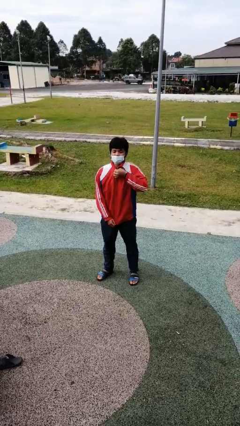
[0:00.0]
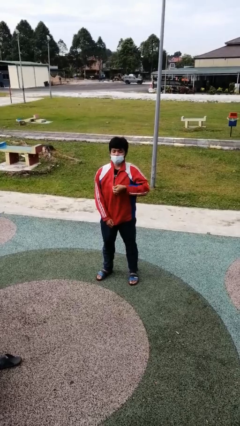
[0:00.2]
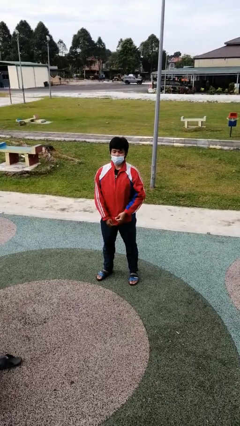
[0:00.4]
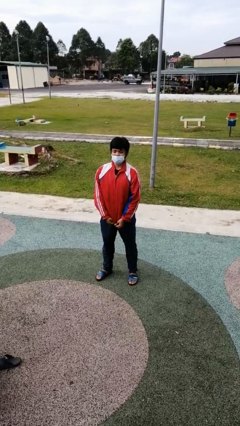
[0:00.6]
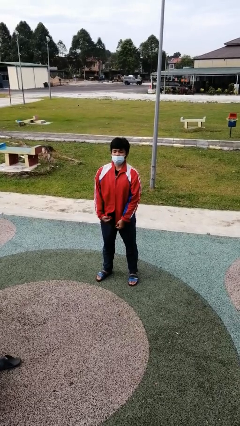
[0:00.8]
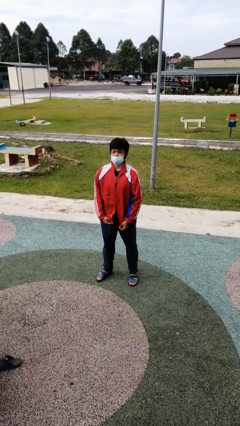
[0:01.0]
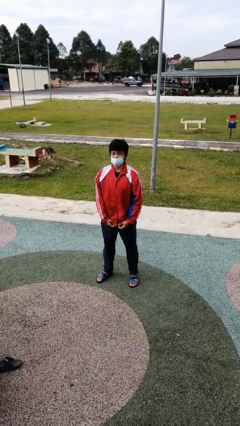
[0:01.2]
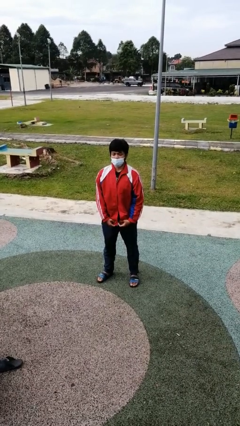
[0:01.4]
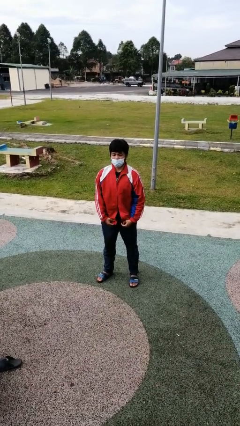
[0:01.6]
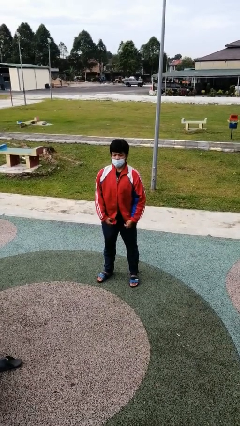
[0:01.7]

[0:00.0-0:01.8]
person unzips jacket

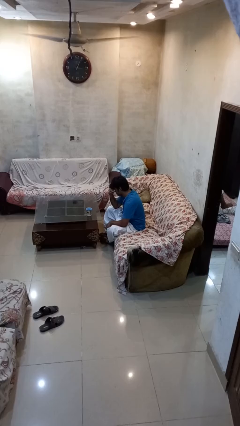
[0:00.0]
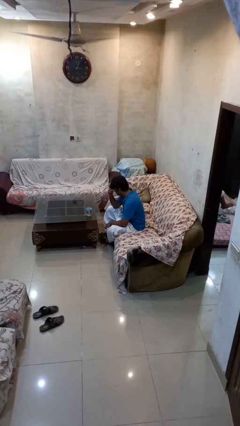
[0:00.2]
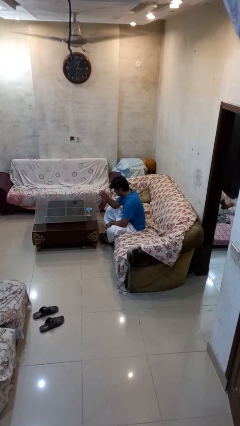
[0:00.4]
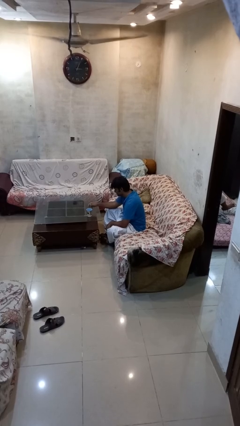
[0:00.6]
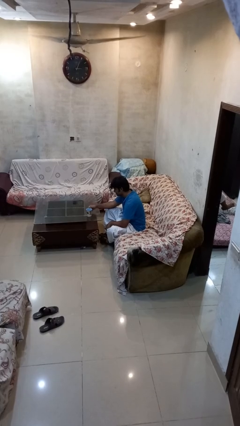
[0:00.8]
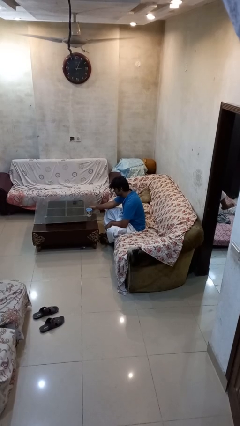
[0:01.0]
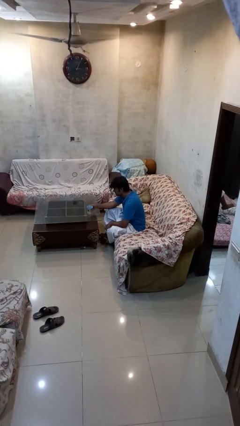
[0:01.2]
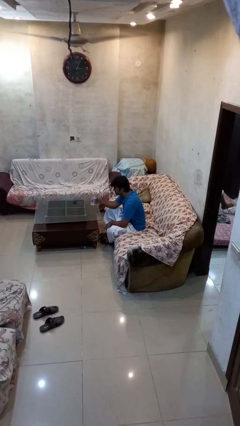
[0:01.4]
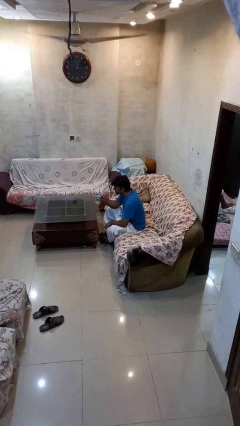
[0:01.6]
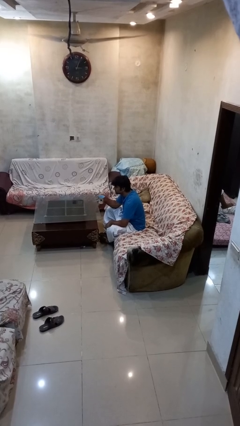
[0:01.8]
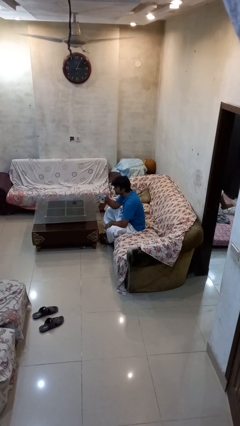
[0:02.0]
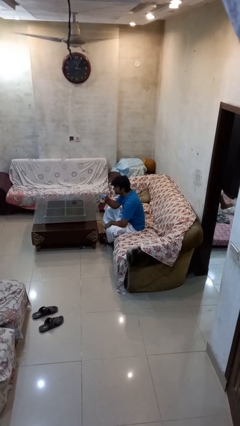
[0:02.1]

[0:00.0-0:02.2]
person picks up object from table

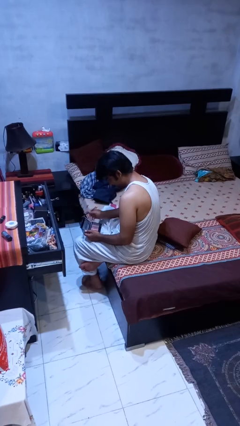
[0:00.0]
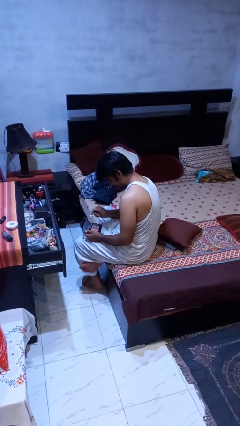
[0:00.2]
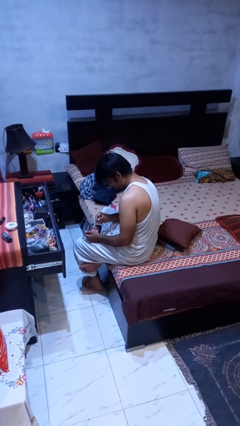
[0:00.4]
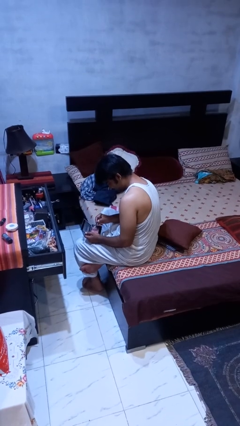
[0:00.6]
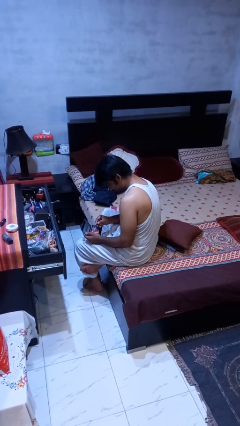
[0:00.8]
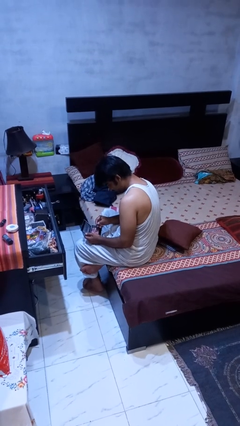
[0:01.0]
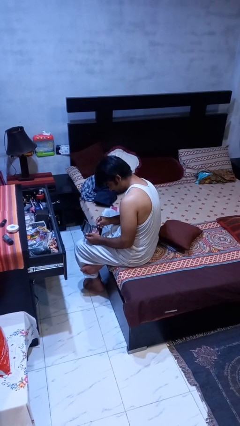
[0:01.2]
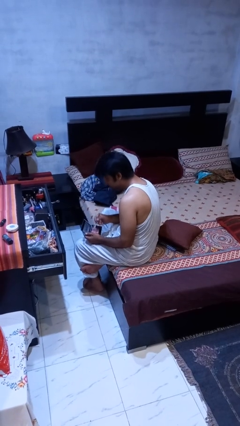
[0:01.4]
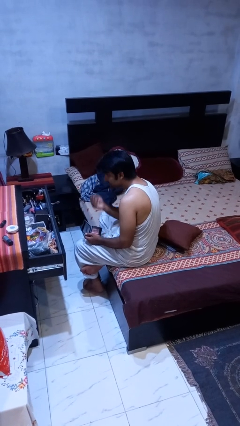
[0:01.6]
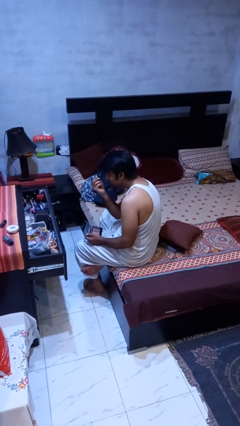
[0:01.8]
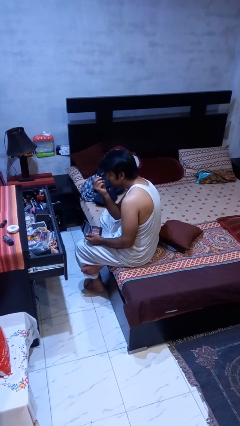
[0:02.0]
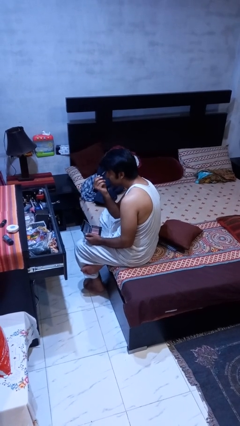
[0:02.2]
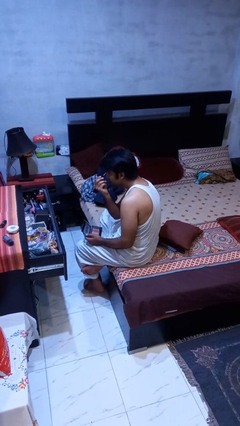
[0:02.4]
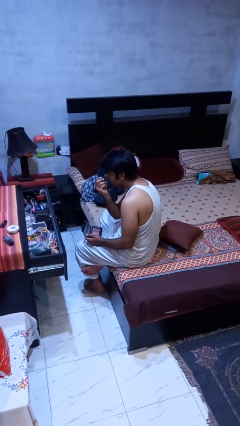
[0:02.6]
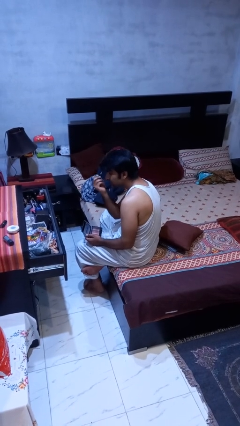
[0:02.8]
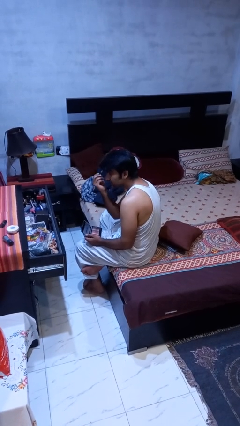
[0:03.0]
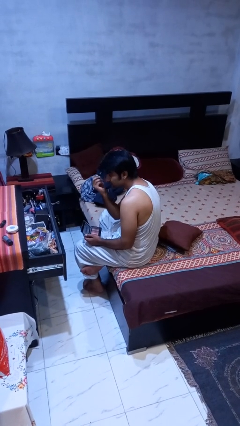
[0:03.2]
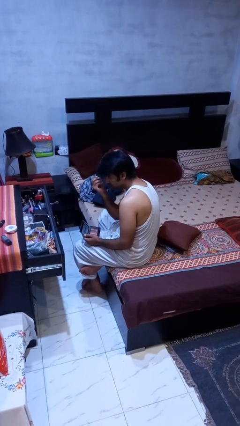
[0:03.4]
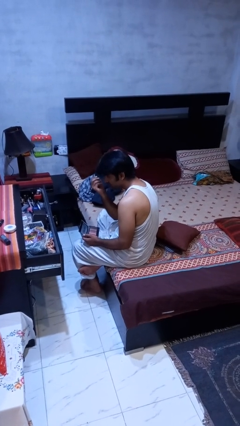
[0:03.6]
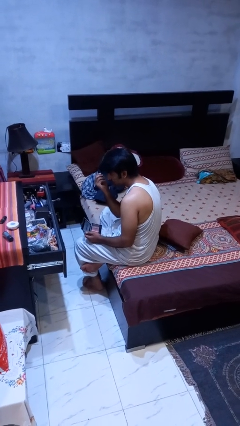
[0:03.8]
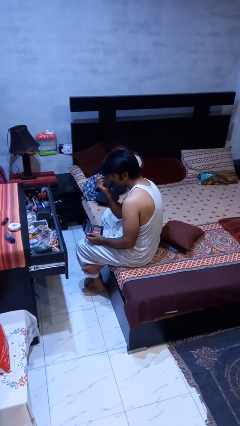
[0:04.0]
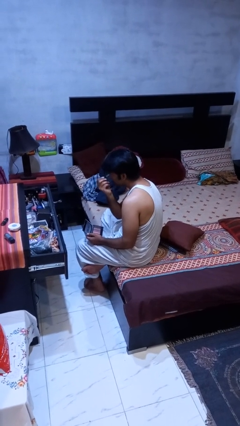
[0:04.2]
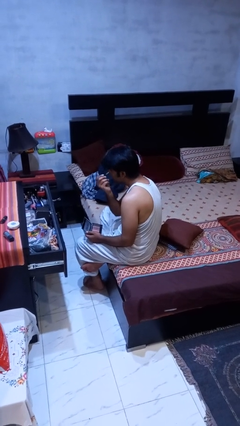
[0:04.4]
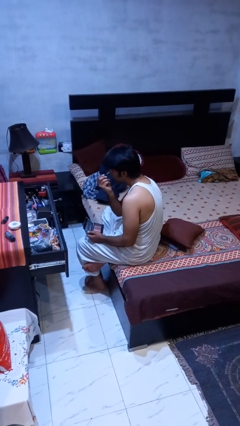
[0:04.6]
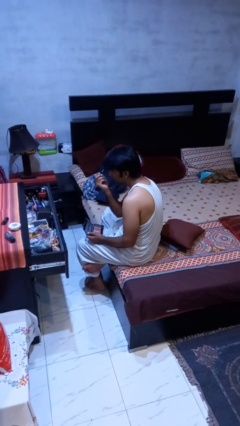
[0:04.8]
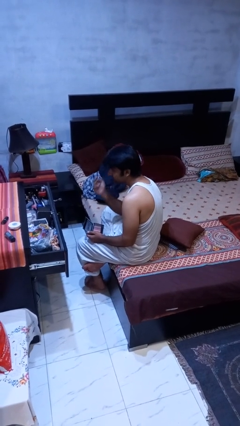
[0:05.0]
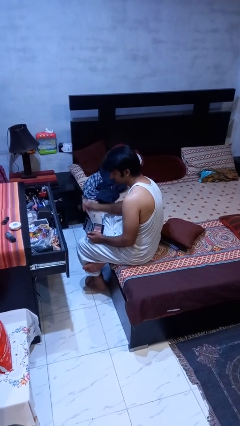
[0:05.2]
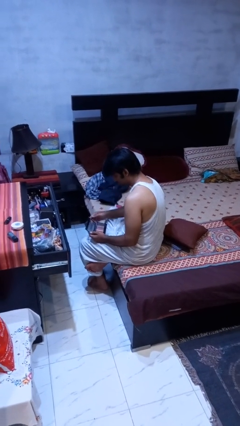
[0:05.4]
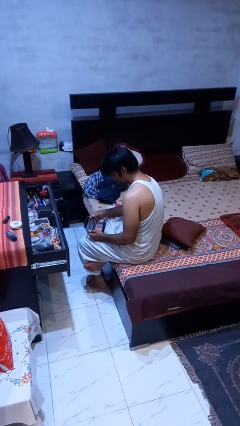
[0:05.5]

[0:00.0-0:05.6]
person applies eye makeup

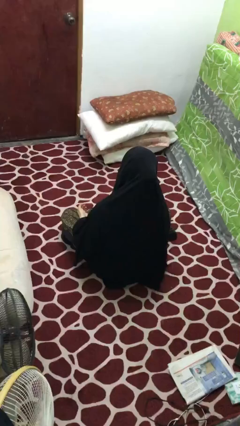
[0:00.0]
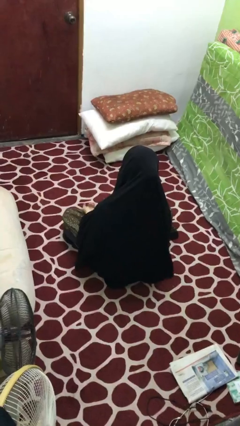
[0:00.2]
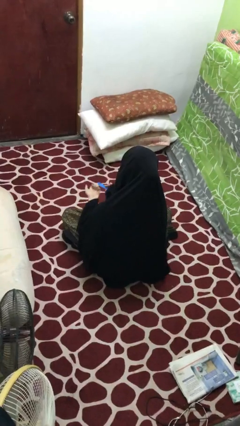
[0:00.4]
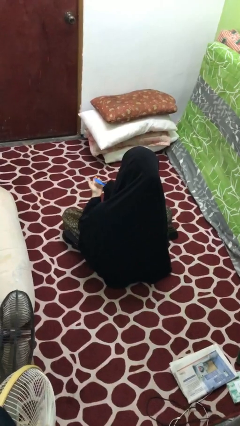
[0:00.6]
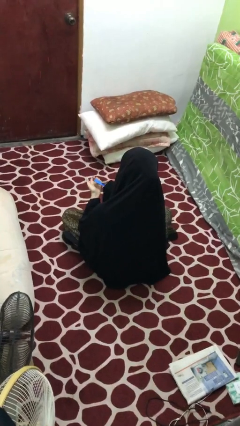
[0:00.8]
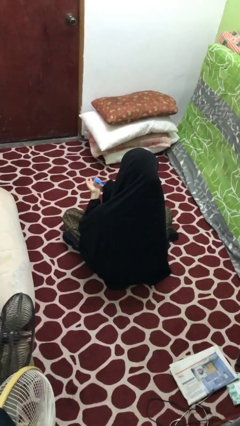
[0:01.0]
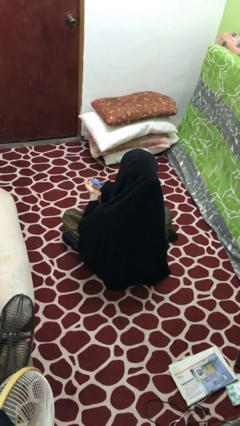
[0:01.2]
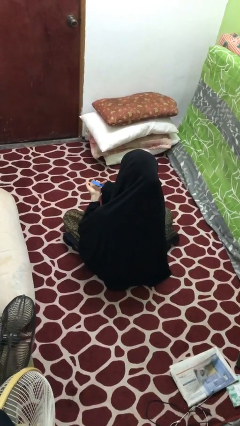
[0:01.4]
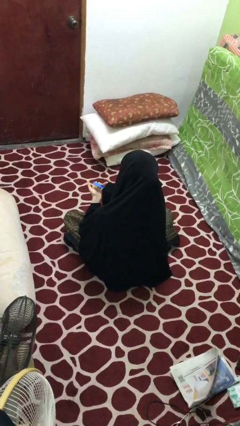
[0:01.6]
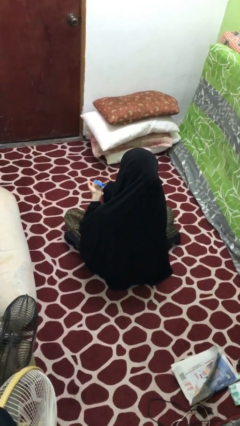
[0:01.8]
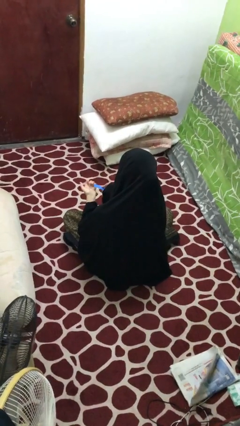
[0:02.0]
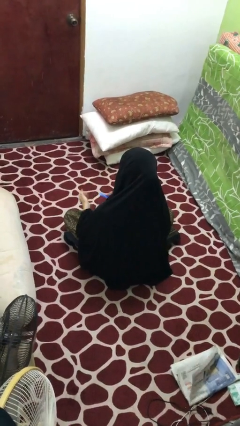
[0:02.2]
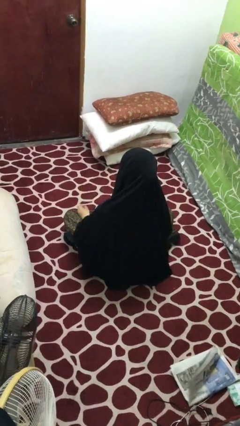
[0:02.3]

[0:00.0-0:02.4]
person files fingernails

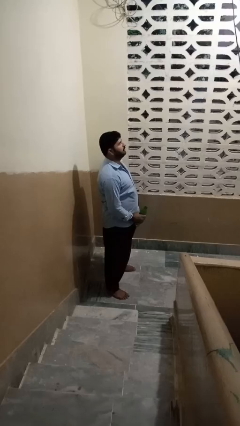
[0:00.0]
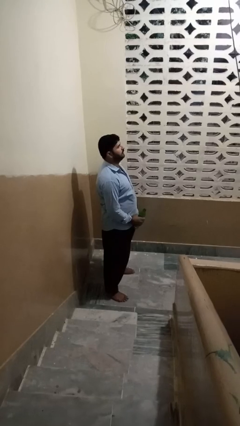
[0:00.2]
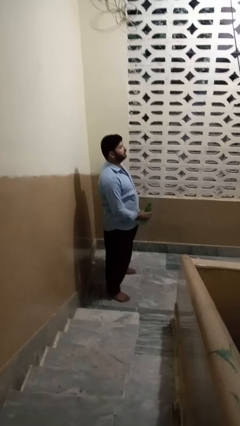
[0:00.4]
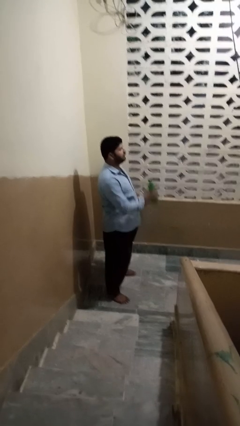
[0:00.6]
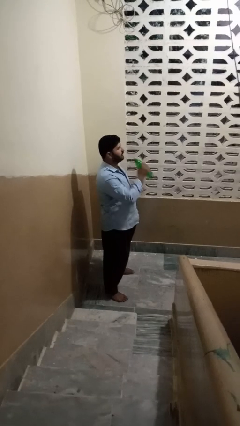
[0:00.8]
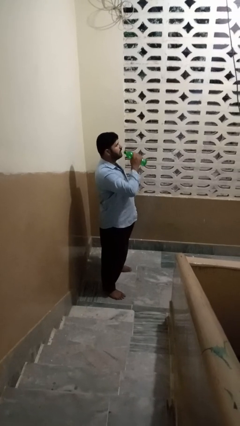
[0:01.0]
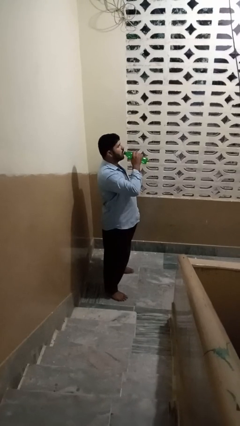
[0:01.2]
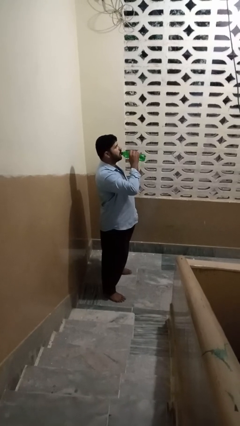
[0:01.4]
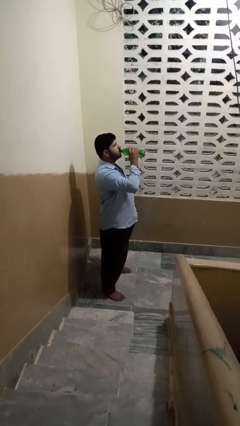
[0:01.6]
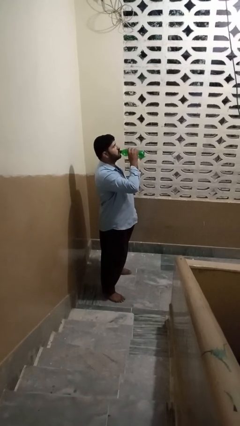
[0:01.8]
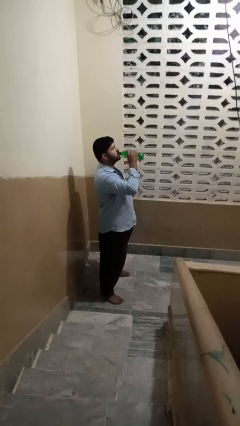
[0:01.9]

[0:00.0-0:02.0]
person drinks from bottle

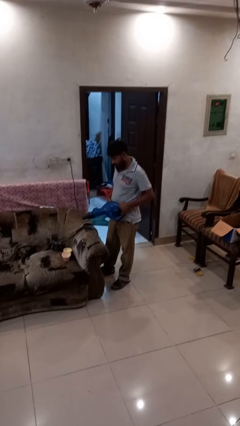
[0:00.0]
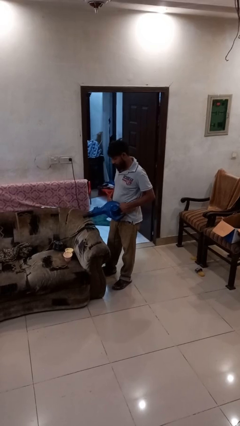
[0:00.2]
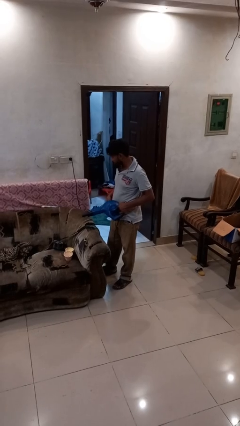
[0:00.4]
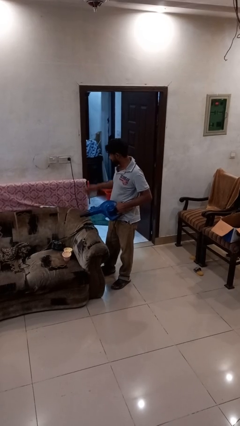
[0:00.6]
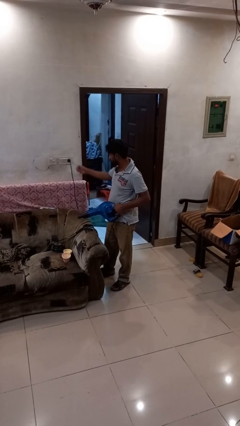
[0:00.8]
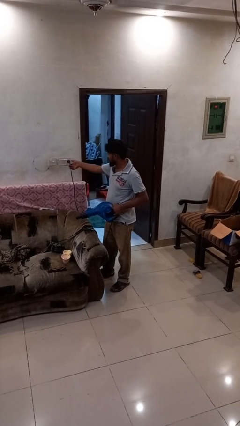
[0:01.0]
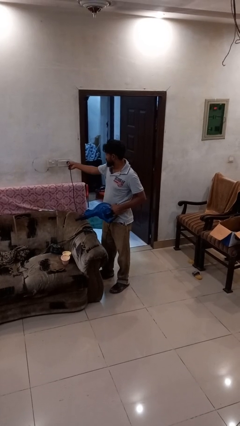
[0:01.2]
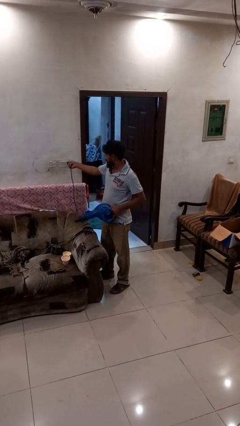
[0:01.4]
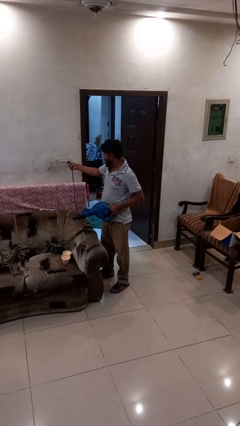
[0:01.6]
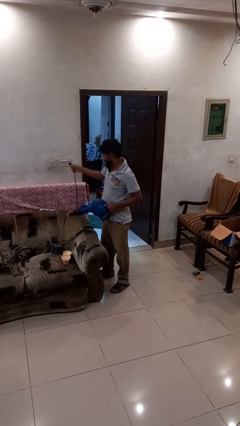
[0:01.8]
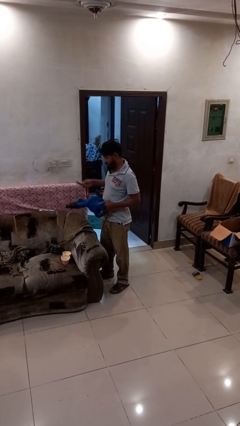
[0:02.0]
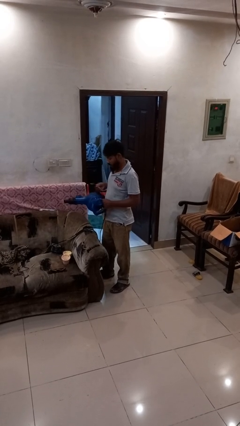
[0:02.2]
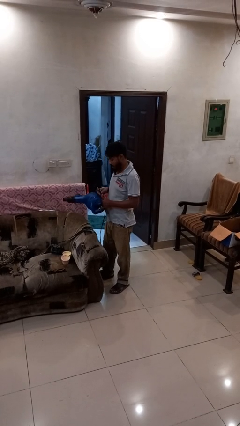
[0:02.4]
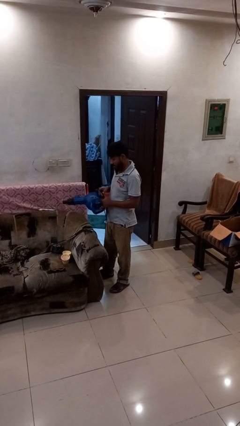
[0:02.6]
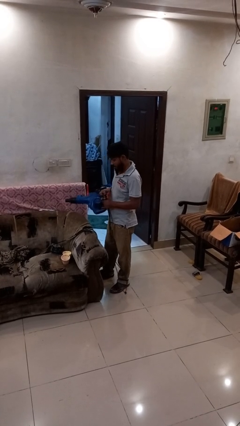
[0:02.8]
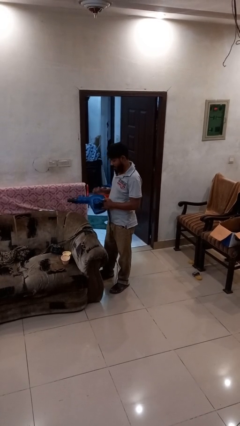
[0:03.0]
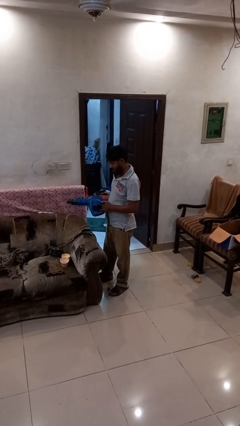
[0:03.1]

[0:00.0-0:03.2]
person unplugs from electrical socket

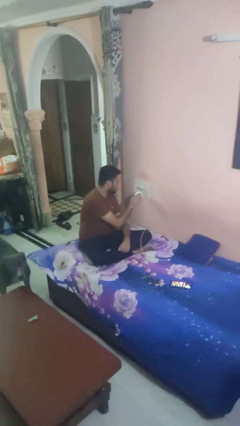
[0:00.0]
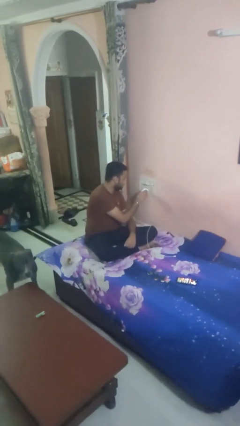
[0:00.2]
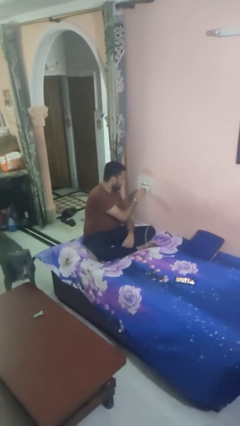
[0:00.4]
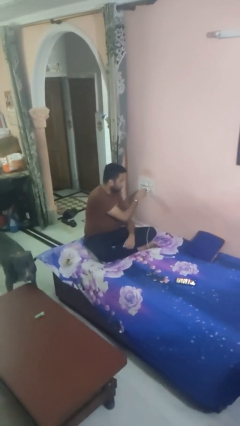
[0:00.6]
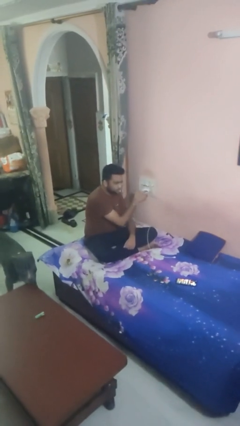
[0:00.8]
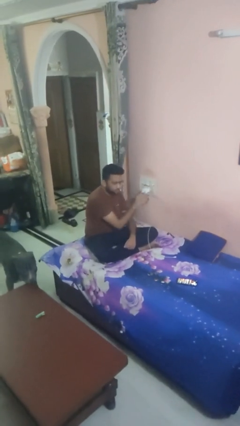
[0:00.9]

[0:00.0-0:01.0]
person plugs into electrical socket
